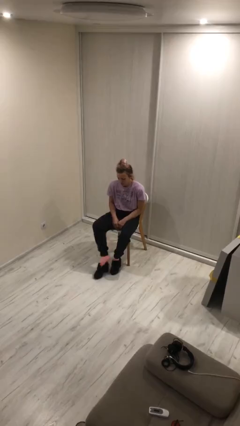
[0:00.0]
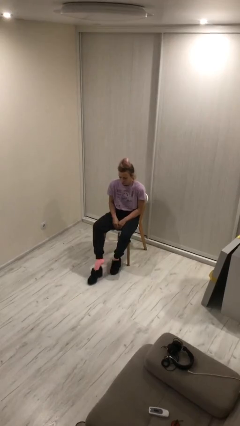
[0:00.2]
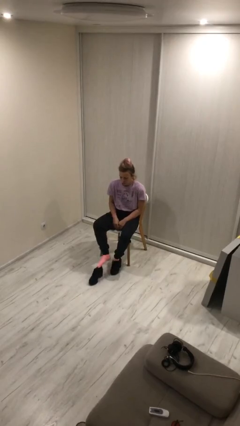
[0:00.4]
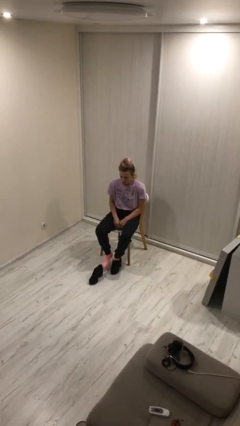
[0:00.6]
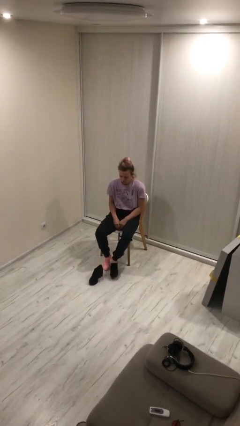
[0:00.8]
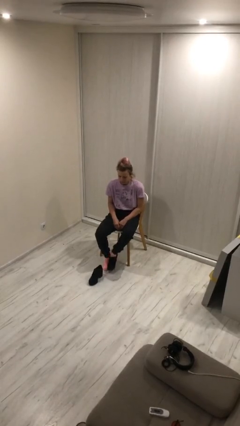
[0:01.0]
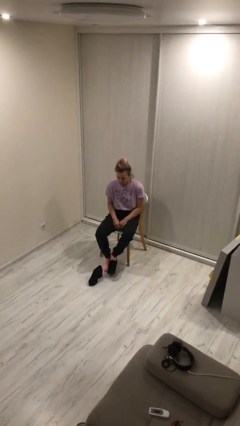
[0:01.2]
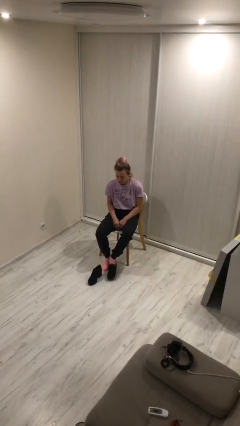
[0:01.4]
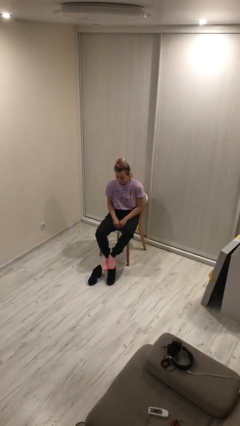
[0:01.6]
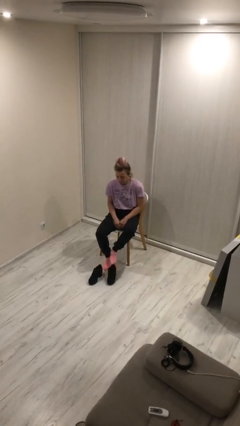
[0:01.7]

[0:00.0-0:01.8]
person takes off shoes

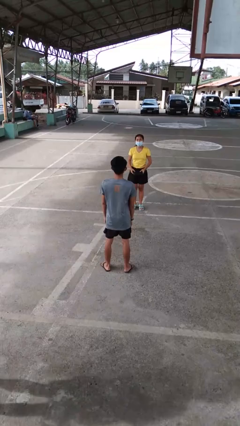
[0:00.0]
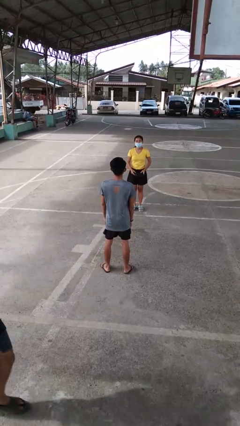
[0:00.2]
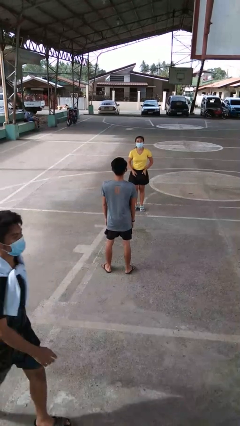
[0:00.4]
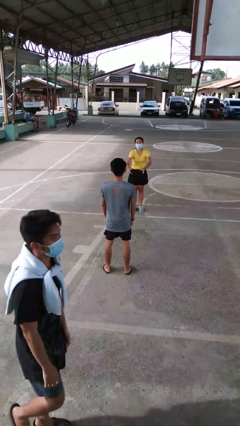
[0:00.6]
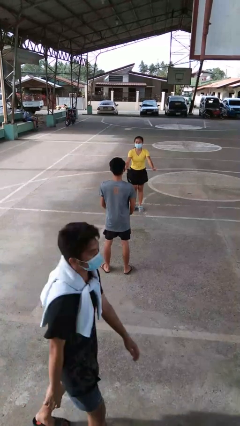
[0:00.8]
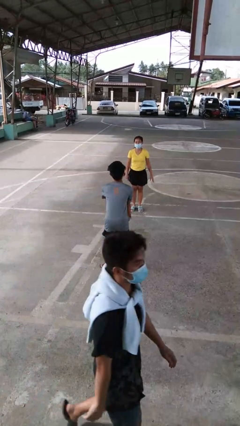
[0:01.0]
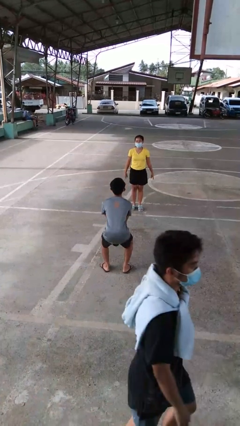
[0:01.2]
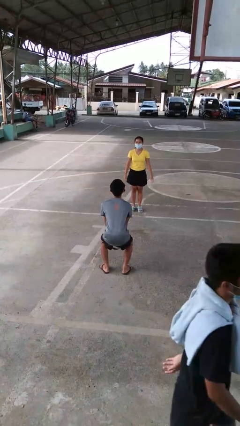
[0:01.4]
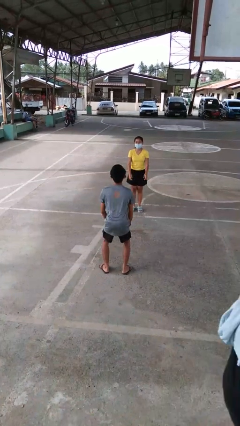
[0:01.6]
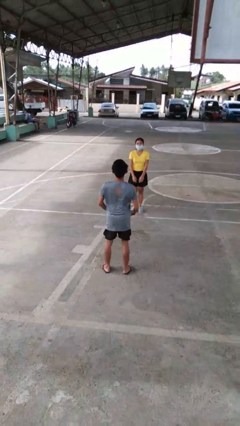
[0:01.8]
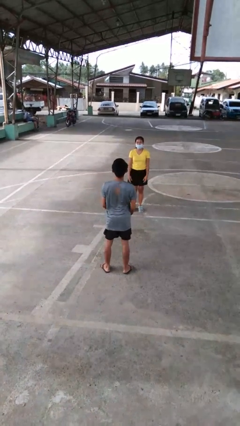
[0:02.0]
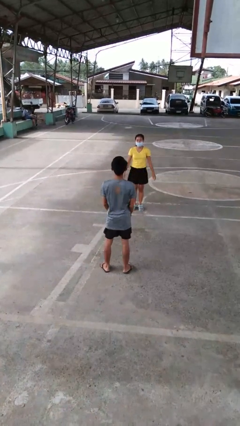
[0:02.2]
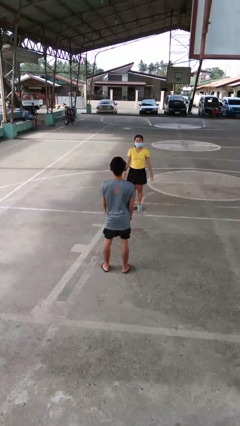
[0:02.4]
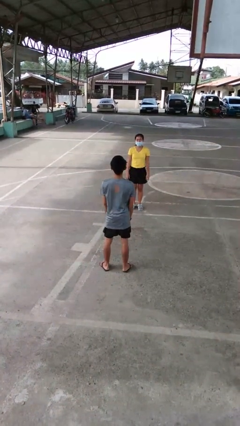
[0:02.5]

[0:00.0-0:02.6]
person catches object from person

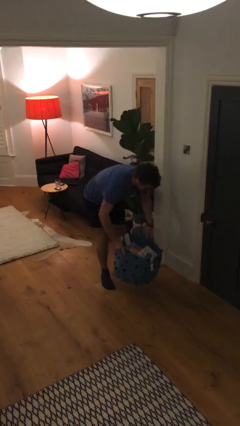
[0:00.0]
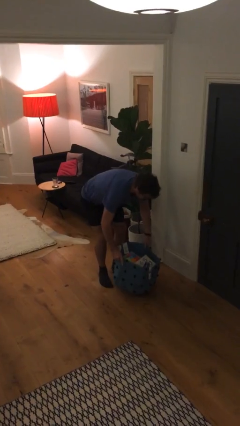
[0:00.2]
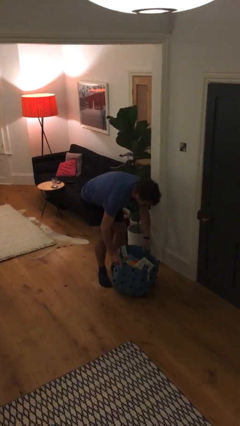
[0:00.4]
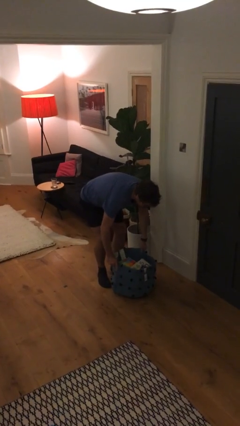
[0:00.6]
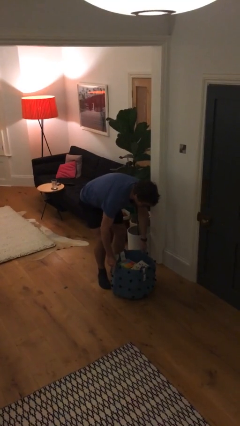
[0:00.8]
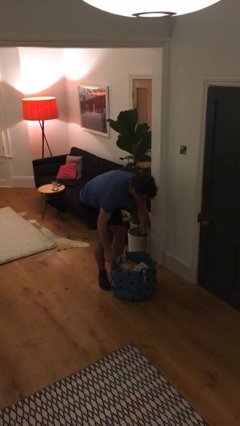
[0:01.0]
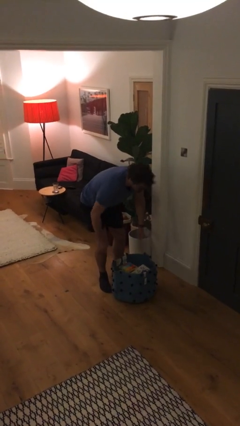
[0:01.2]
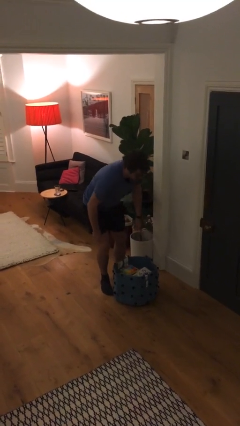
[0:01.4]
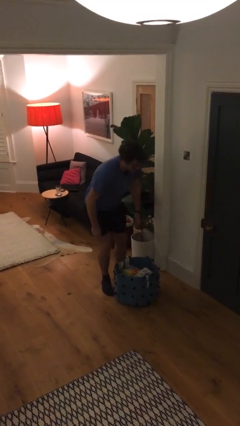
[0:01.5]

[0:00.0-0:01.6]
person puts down object on floor

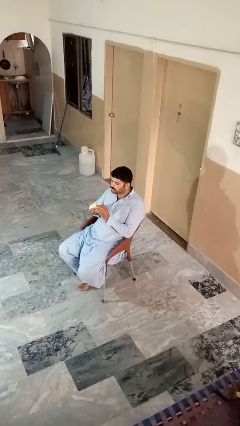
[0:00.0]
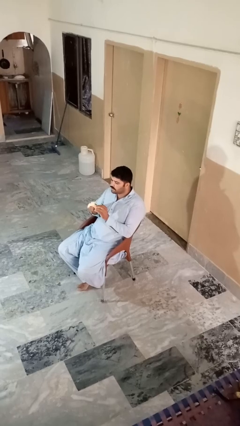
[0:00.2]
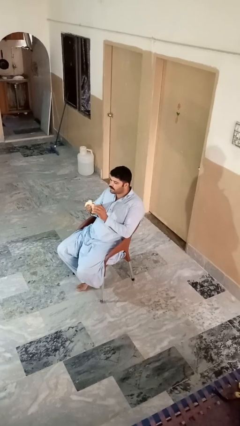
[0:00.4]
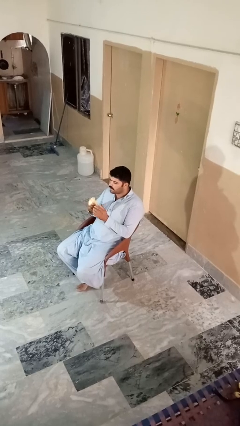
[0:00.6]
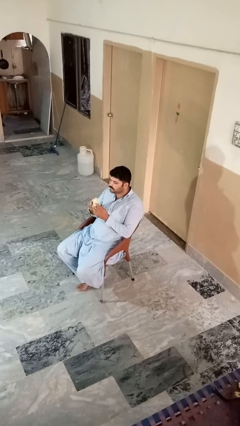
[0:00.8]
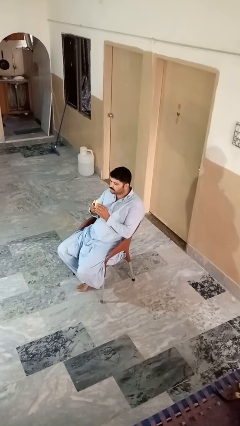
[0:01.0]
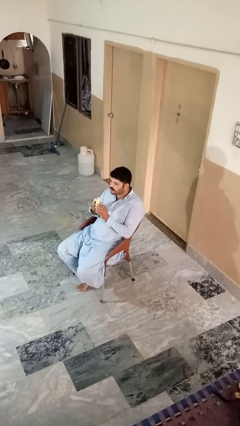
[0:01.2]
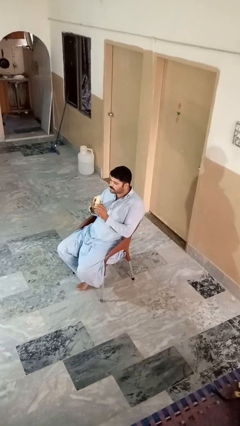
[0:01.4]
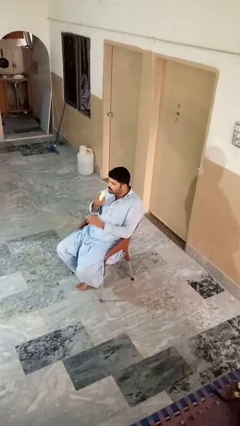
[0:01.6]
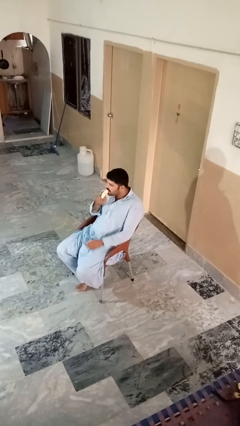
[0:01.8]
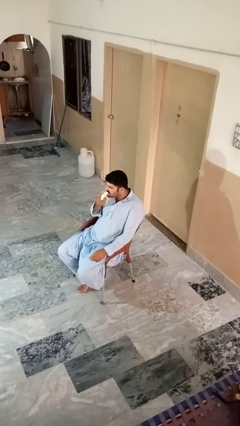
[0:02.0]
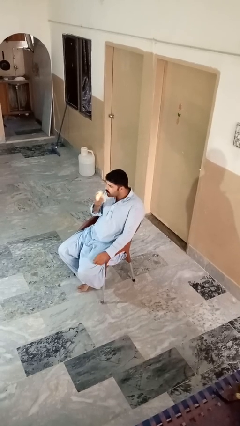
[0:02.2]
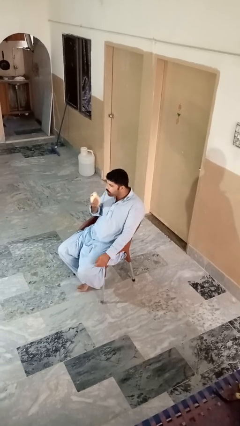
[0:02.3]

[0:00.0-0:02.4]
person eats banana

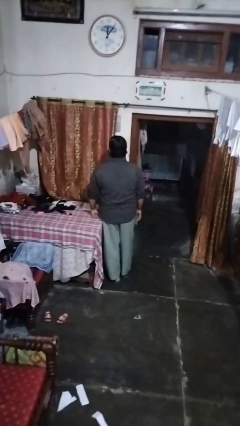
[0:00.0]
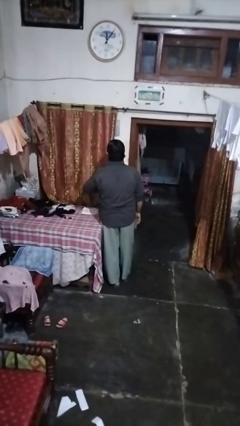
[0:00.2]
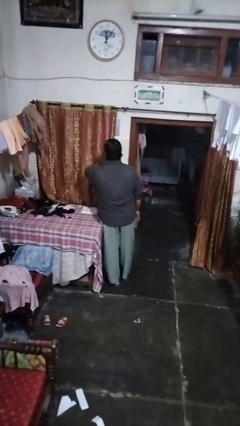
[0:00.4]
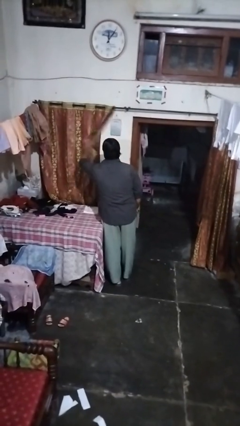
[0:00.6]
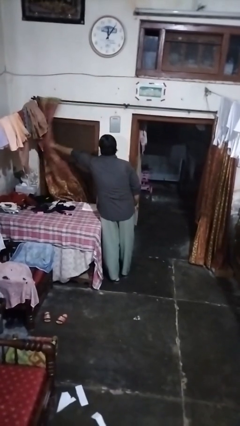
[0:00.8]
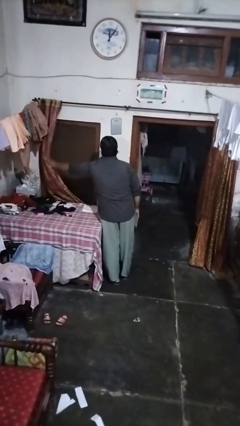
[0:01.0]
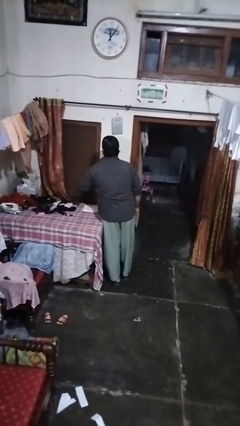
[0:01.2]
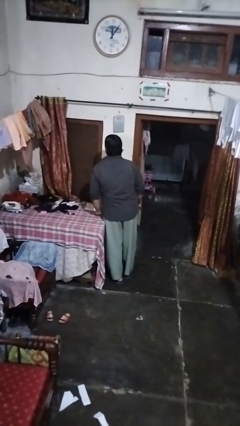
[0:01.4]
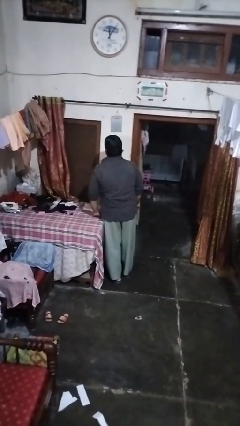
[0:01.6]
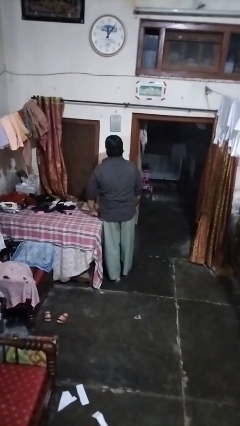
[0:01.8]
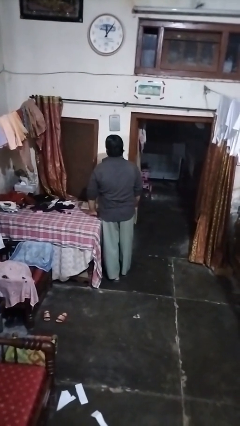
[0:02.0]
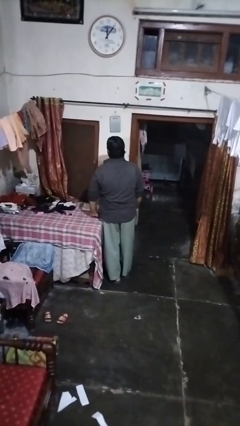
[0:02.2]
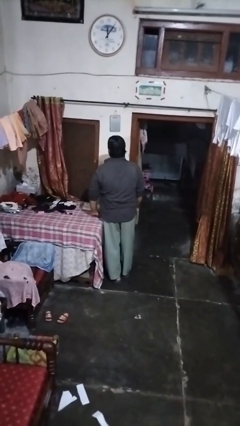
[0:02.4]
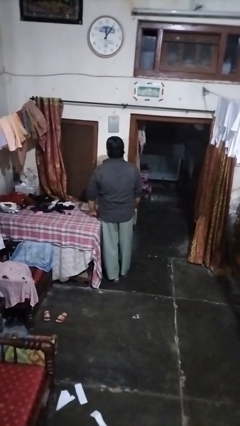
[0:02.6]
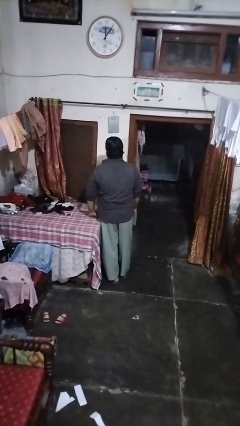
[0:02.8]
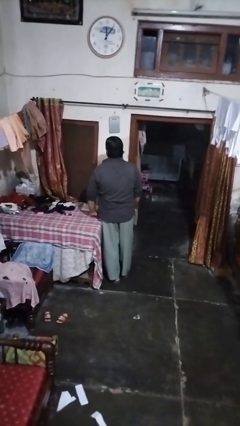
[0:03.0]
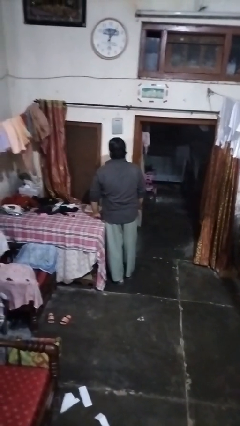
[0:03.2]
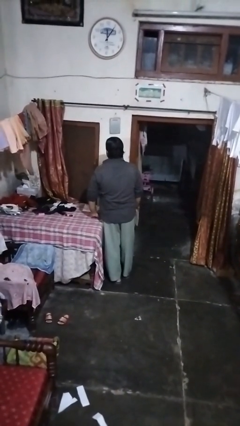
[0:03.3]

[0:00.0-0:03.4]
person opens curtains

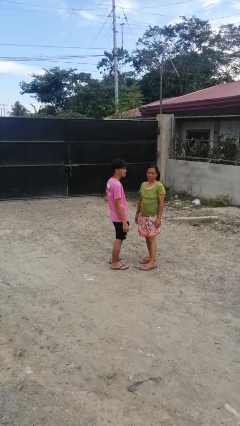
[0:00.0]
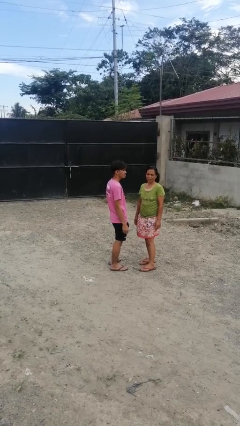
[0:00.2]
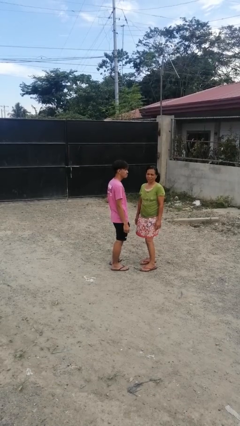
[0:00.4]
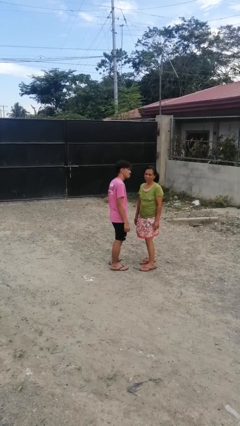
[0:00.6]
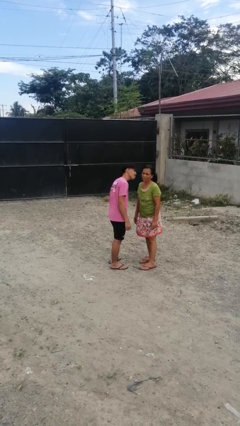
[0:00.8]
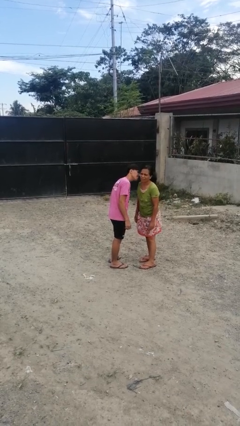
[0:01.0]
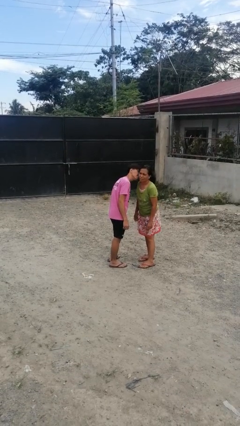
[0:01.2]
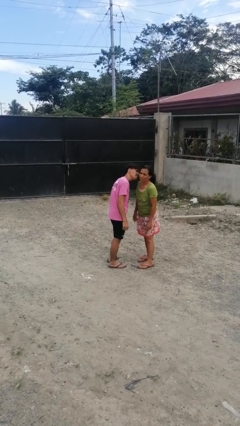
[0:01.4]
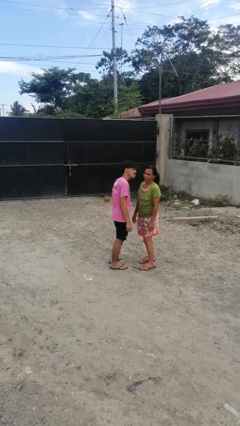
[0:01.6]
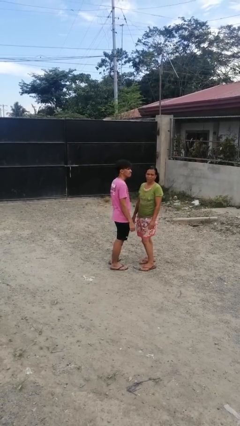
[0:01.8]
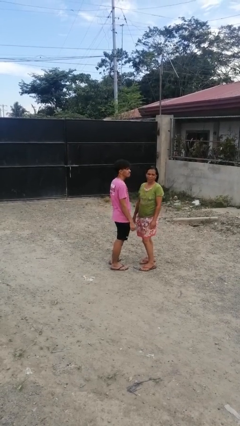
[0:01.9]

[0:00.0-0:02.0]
person kisses cheek of person

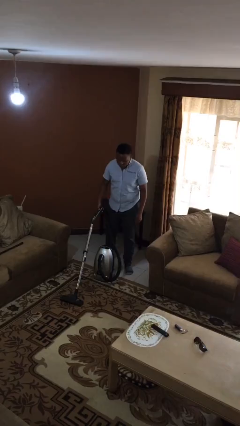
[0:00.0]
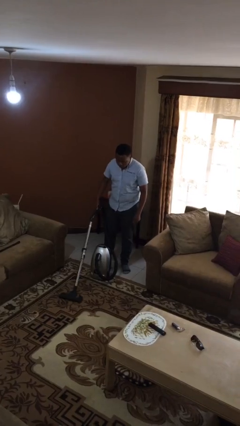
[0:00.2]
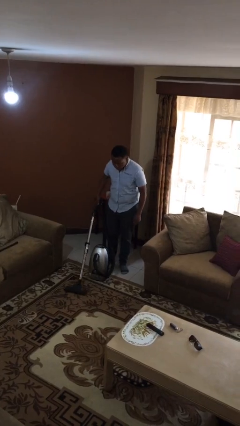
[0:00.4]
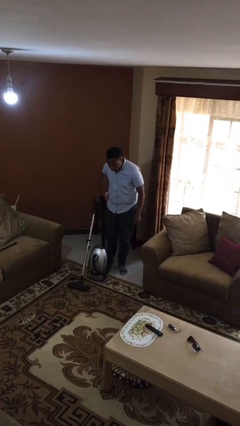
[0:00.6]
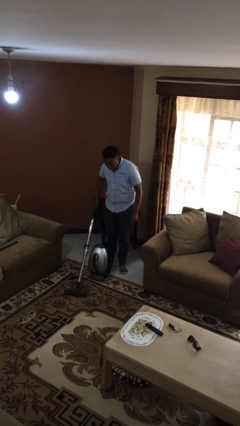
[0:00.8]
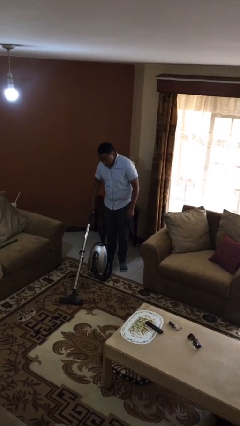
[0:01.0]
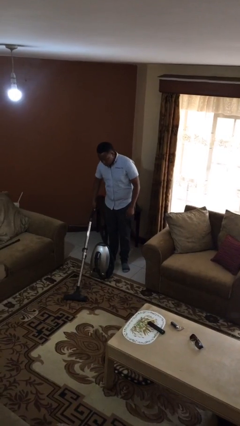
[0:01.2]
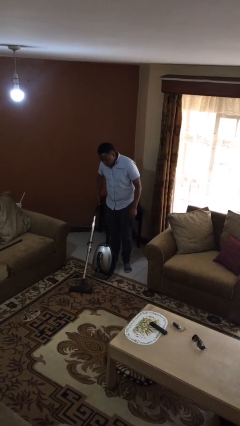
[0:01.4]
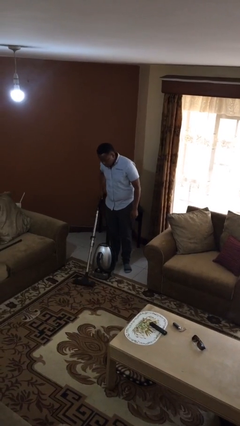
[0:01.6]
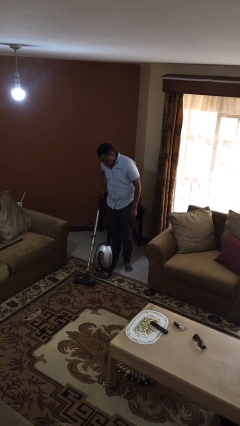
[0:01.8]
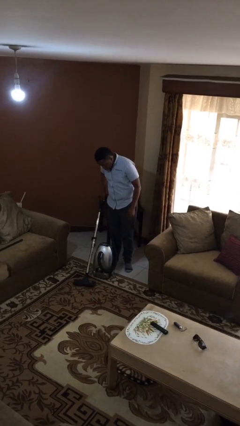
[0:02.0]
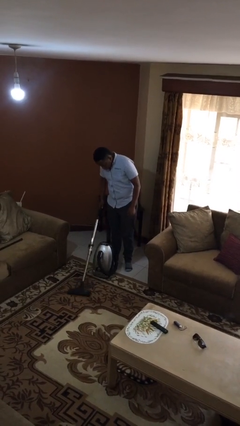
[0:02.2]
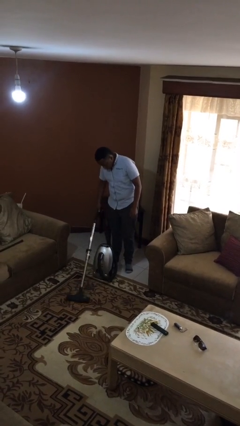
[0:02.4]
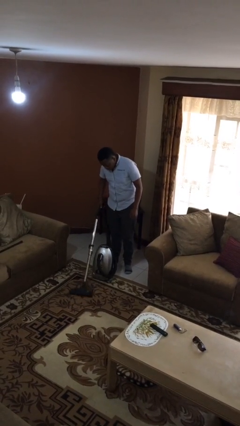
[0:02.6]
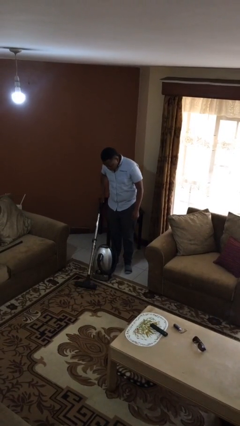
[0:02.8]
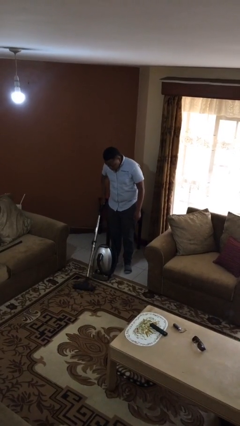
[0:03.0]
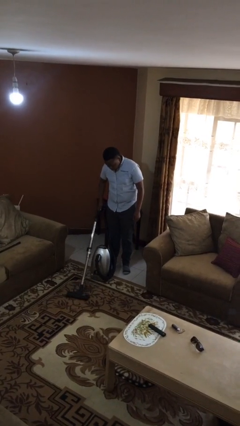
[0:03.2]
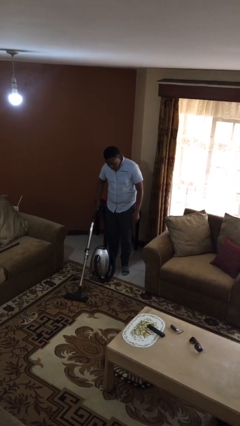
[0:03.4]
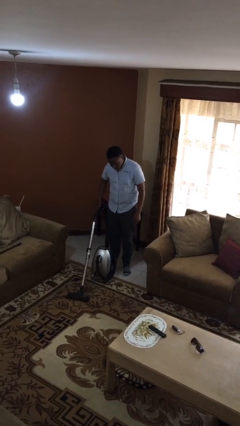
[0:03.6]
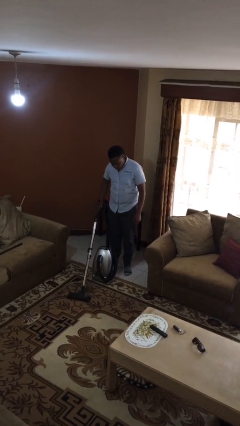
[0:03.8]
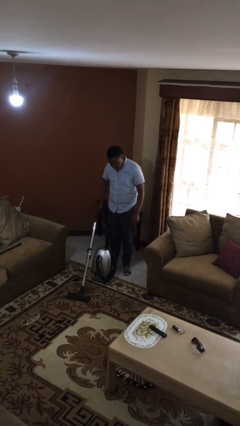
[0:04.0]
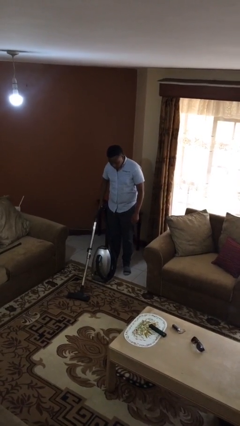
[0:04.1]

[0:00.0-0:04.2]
person vacuums carpet
